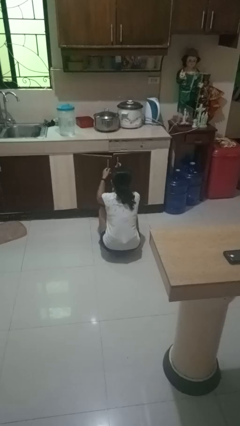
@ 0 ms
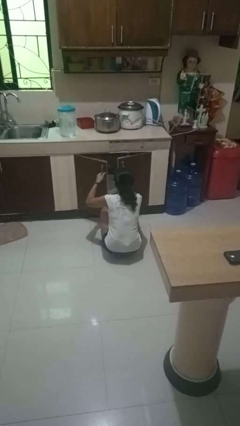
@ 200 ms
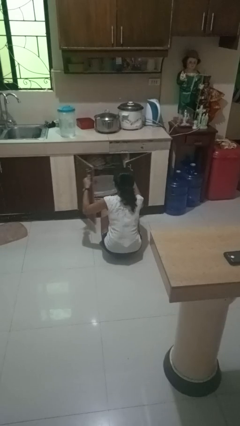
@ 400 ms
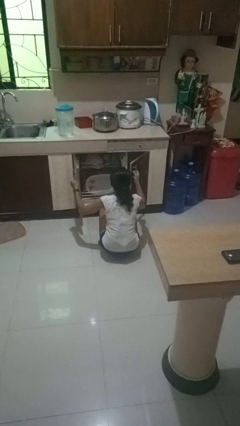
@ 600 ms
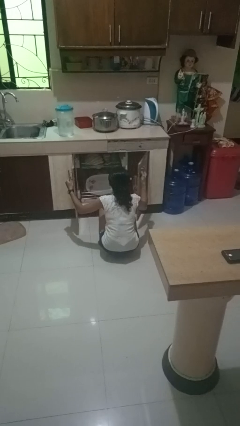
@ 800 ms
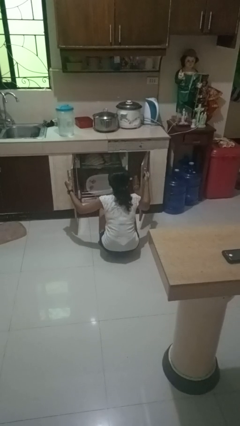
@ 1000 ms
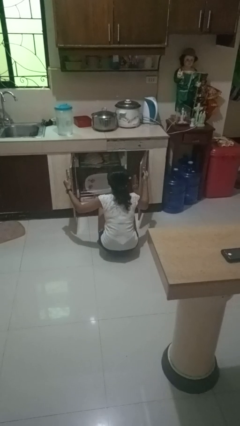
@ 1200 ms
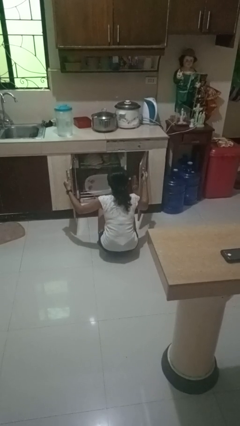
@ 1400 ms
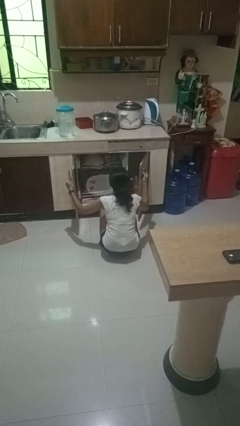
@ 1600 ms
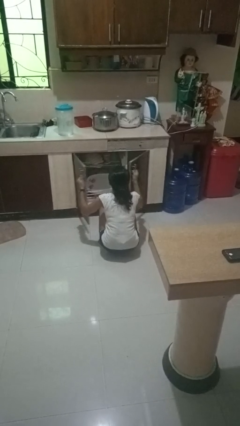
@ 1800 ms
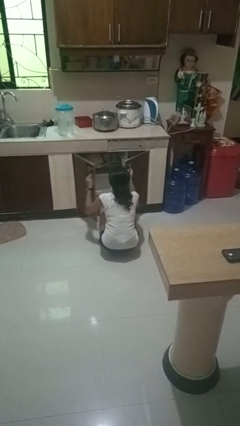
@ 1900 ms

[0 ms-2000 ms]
person opens dishwasher

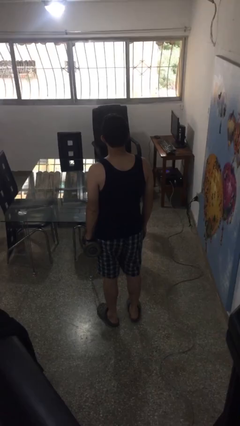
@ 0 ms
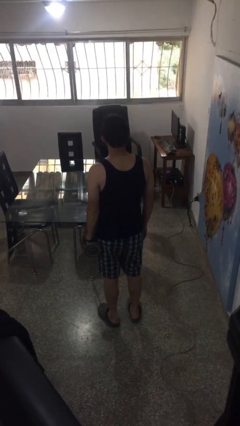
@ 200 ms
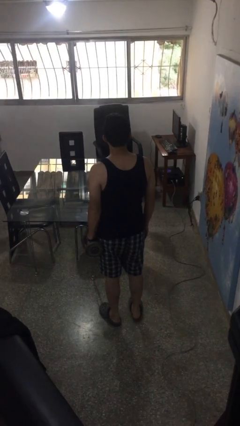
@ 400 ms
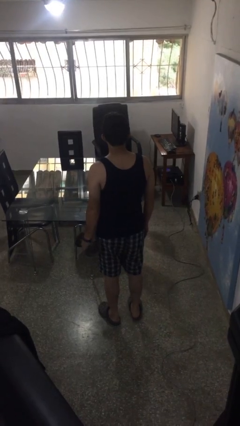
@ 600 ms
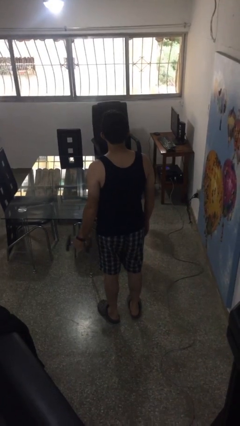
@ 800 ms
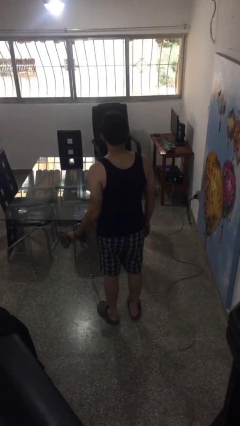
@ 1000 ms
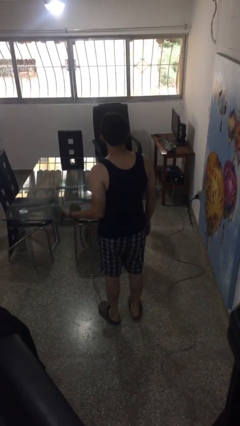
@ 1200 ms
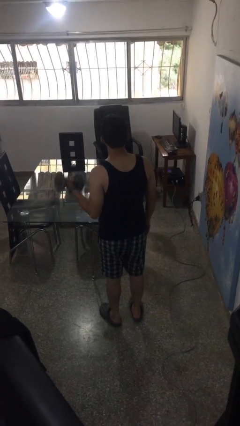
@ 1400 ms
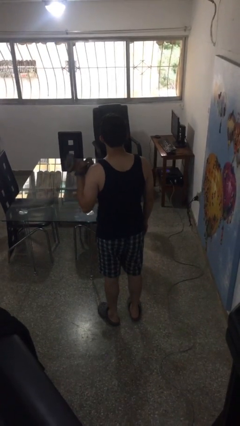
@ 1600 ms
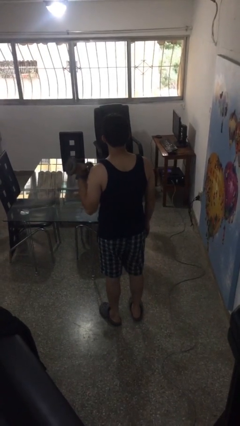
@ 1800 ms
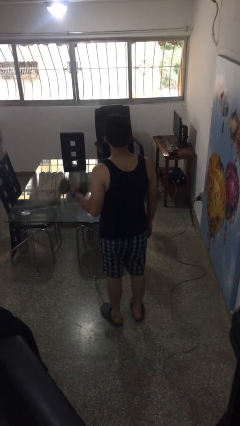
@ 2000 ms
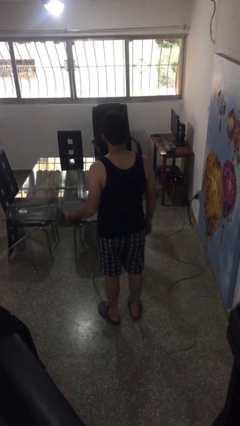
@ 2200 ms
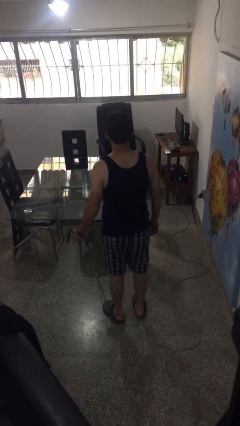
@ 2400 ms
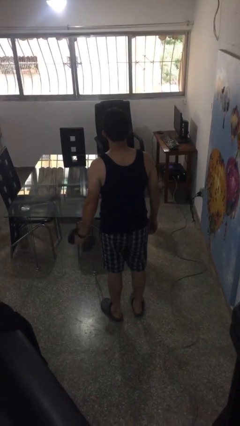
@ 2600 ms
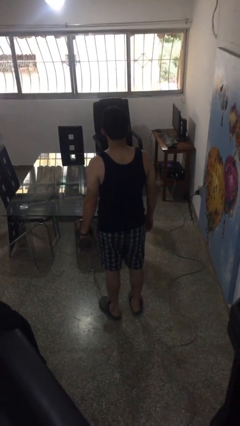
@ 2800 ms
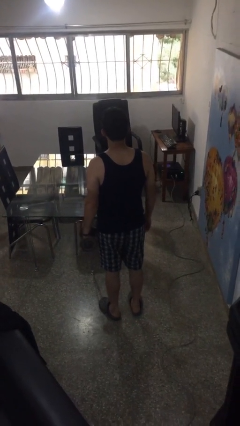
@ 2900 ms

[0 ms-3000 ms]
person lifts dumbbells

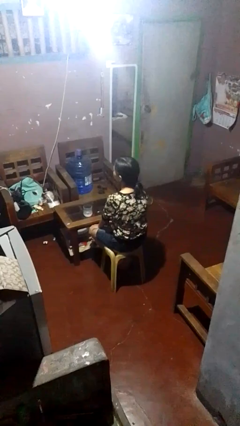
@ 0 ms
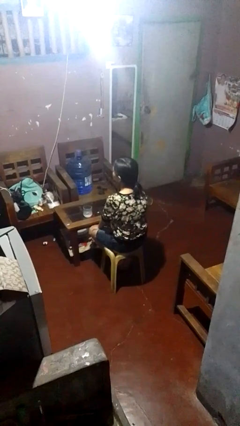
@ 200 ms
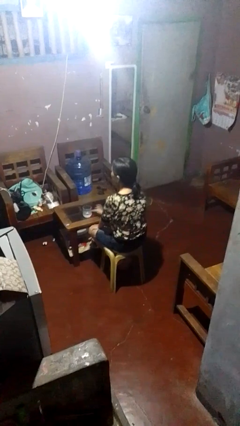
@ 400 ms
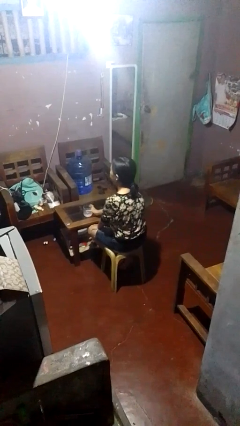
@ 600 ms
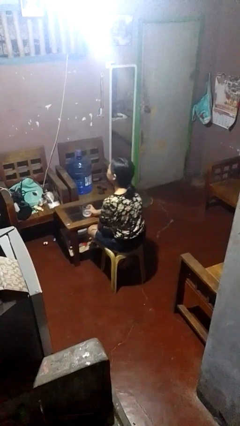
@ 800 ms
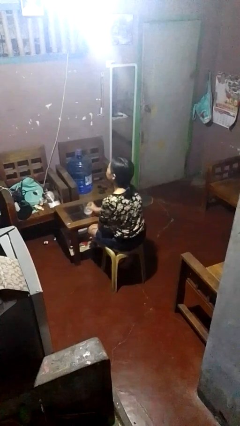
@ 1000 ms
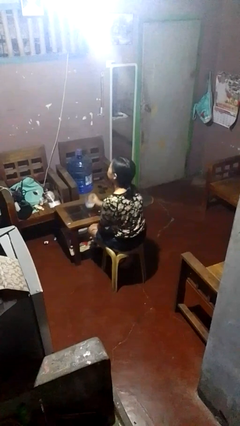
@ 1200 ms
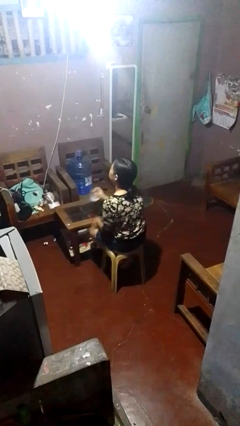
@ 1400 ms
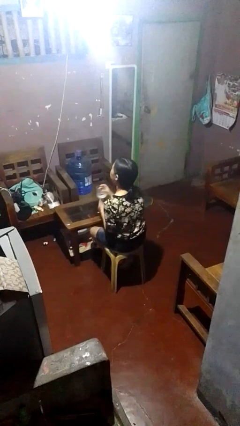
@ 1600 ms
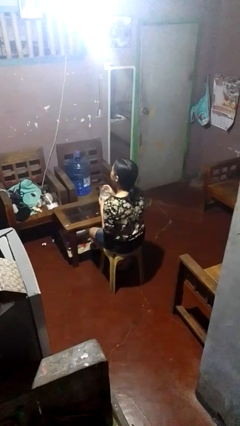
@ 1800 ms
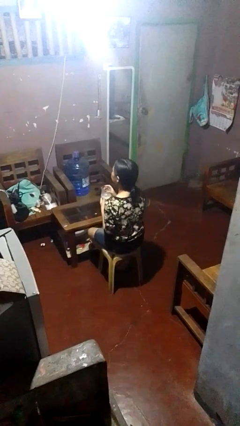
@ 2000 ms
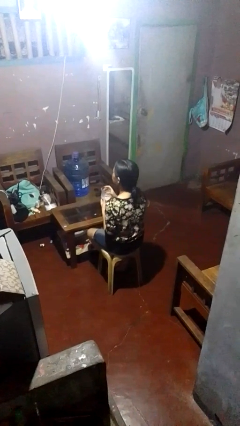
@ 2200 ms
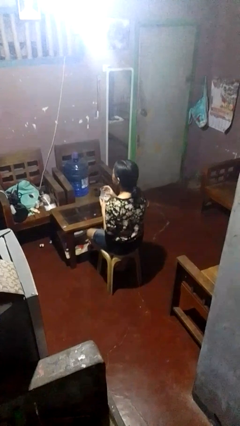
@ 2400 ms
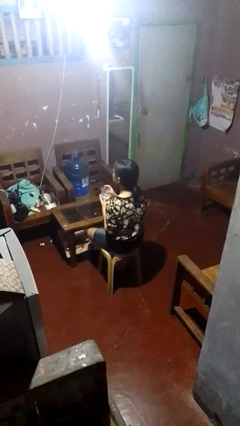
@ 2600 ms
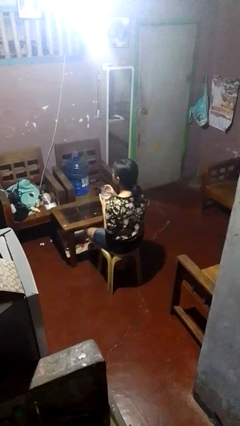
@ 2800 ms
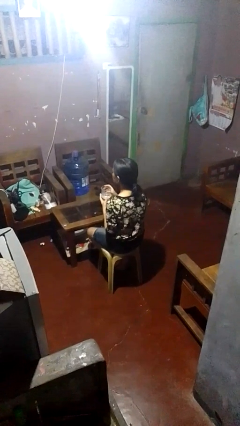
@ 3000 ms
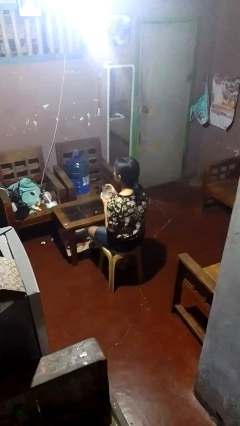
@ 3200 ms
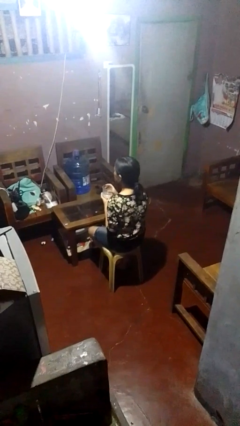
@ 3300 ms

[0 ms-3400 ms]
person picks up object from table

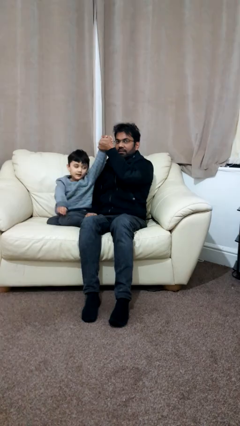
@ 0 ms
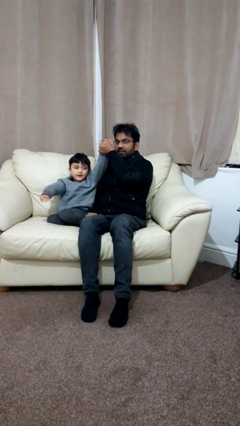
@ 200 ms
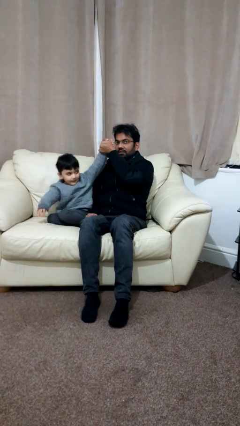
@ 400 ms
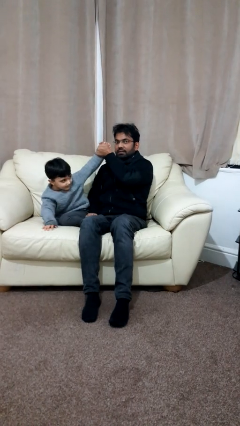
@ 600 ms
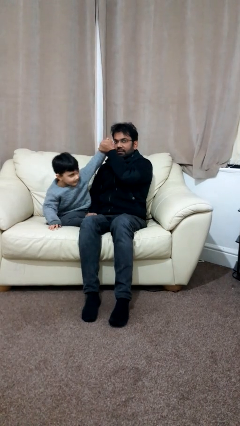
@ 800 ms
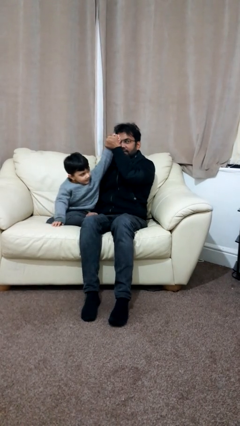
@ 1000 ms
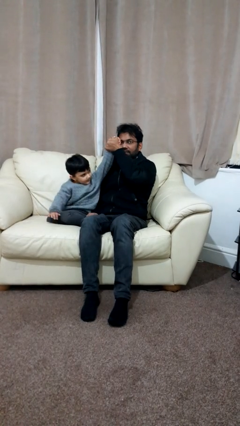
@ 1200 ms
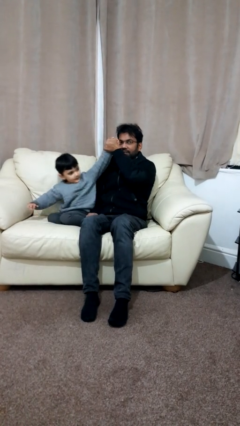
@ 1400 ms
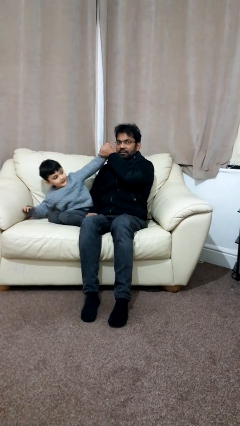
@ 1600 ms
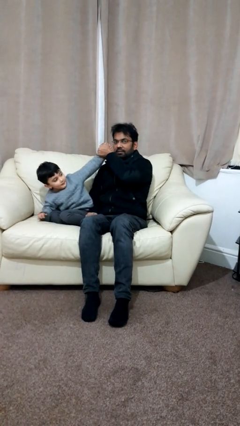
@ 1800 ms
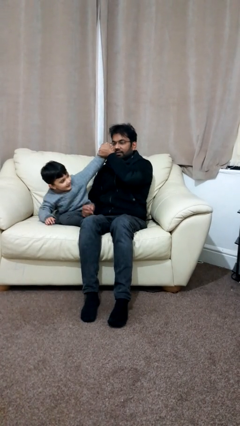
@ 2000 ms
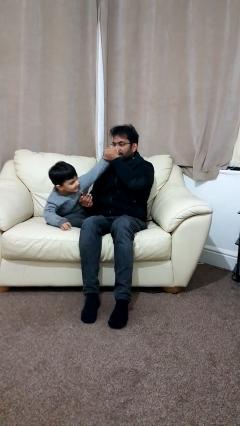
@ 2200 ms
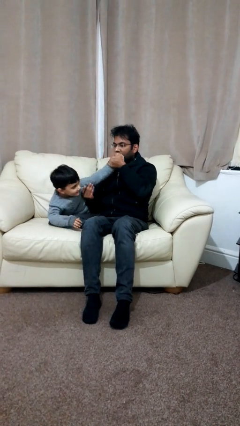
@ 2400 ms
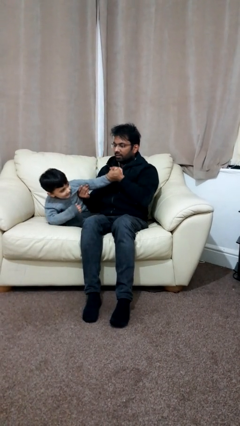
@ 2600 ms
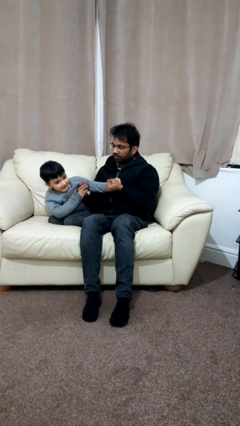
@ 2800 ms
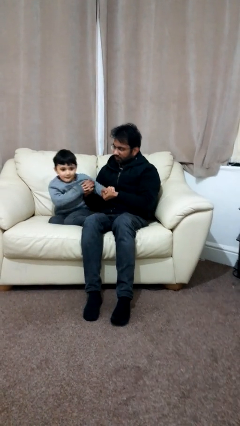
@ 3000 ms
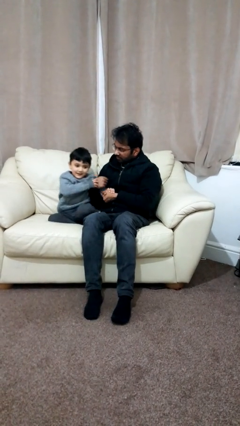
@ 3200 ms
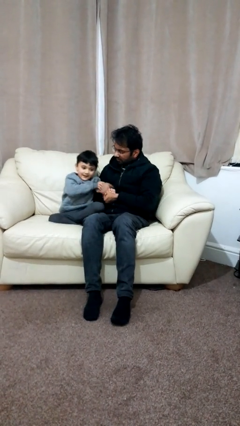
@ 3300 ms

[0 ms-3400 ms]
person highfives hand

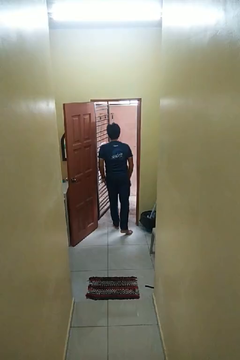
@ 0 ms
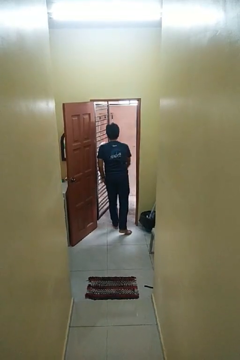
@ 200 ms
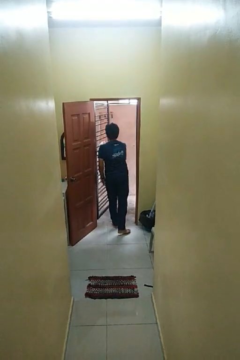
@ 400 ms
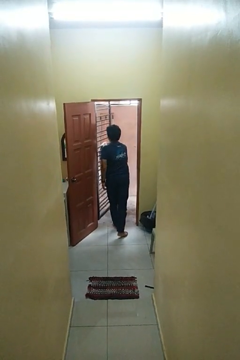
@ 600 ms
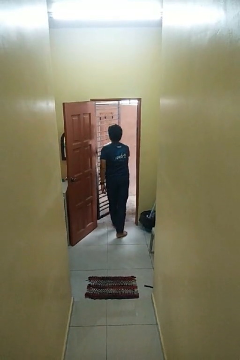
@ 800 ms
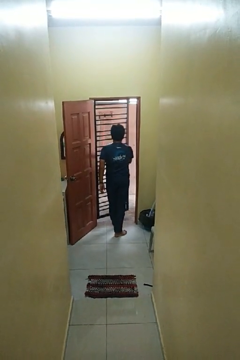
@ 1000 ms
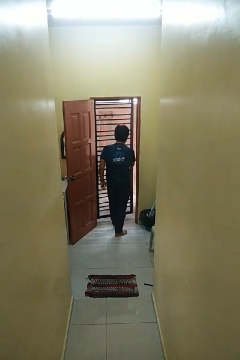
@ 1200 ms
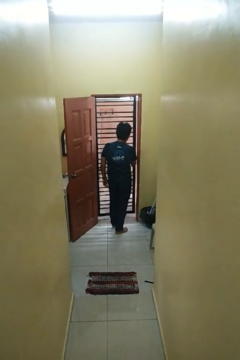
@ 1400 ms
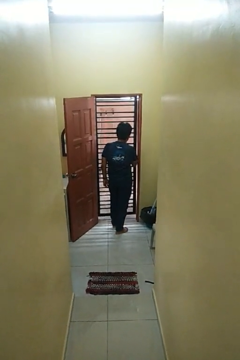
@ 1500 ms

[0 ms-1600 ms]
person closes gate

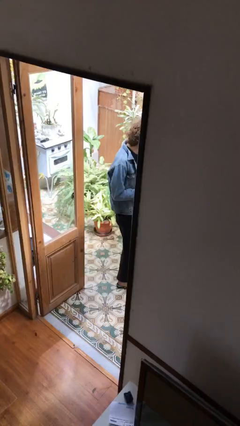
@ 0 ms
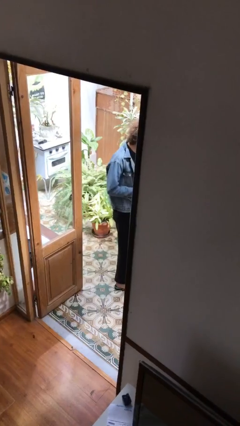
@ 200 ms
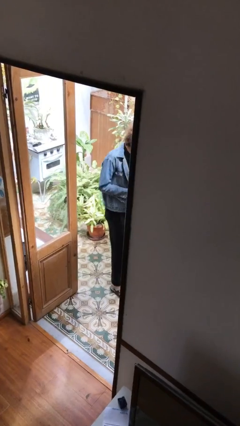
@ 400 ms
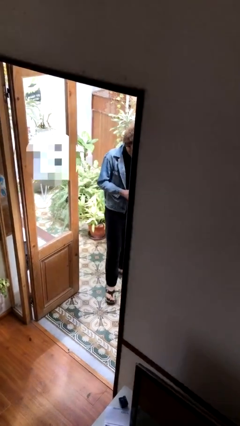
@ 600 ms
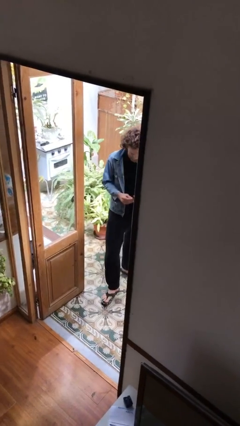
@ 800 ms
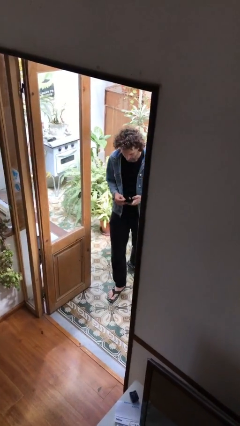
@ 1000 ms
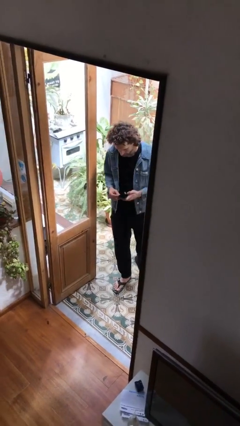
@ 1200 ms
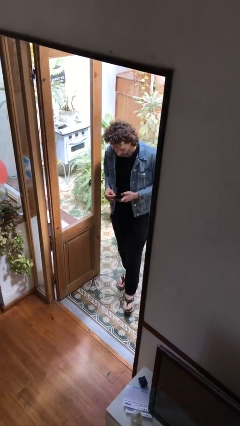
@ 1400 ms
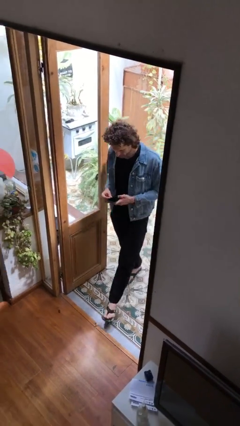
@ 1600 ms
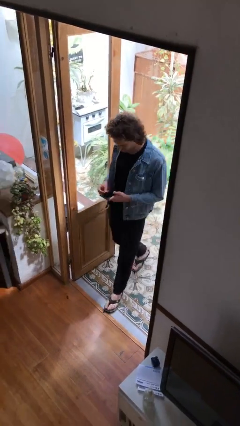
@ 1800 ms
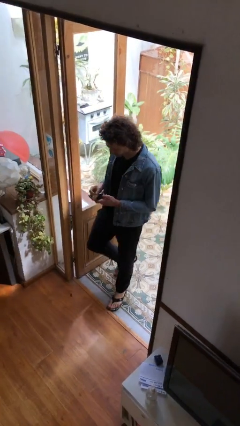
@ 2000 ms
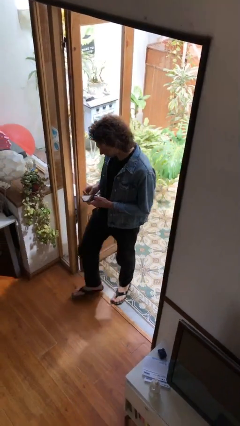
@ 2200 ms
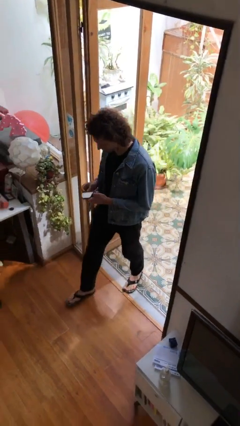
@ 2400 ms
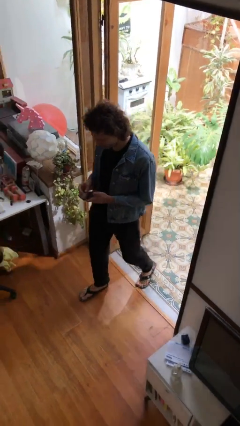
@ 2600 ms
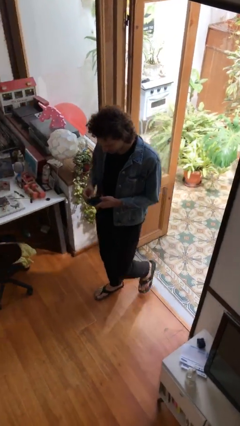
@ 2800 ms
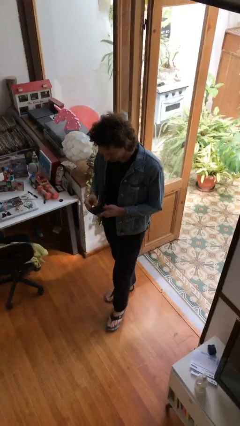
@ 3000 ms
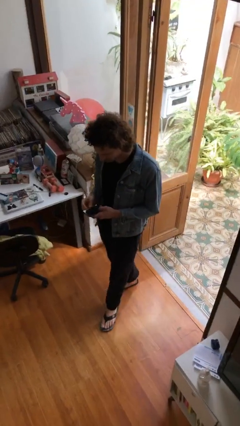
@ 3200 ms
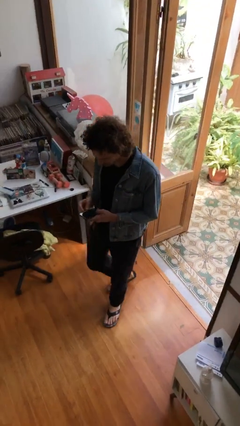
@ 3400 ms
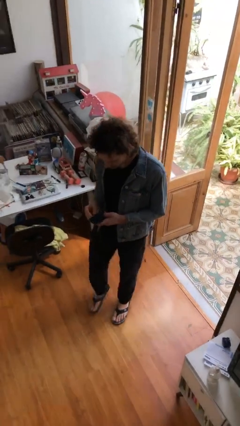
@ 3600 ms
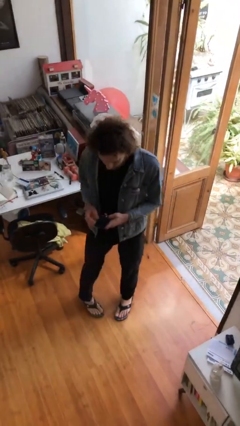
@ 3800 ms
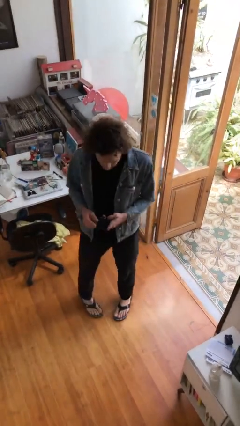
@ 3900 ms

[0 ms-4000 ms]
person enters scene through structure

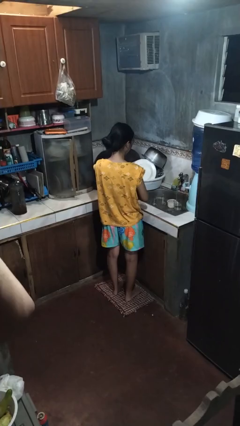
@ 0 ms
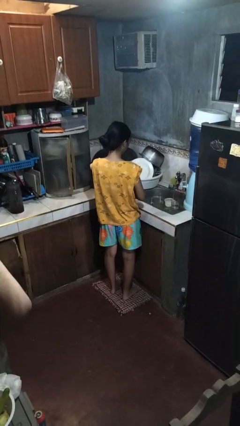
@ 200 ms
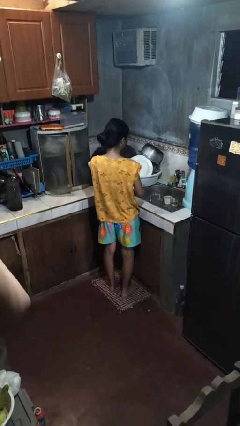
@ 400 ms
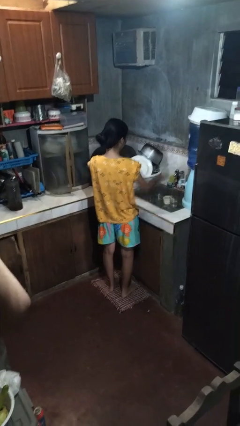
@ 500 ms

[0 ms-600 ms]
person turns off faucet
